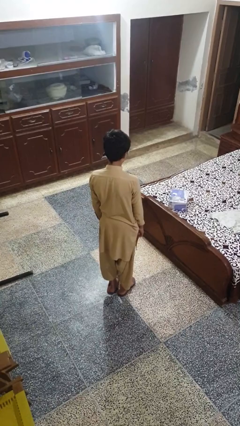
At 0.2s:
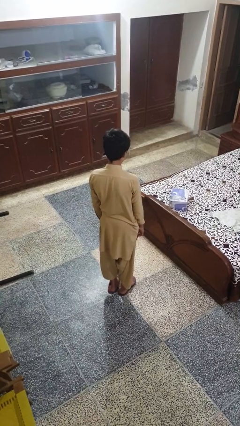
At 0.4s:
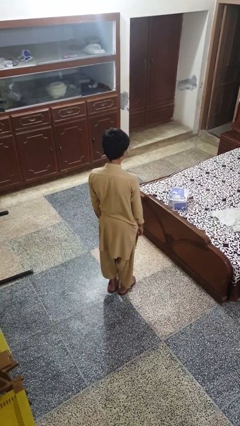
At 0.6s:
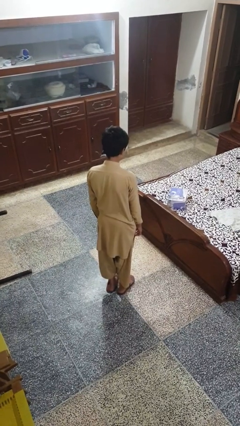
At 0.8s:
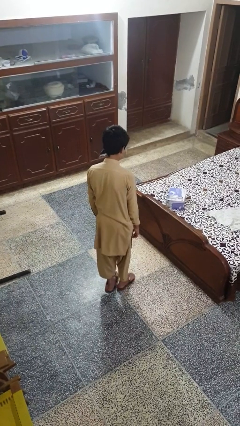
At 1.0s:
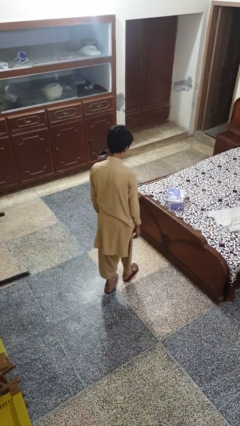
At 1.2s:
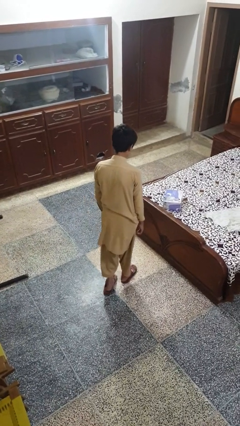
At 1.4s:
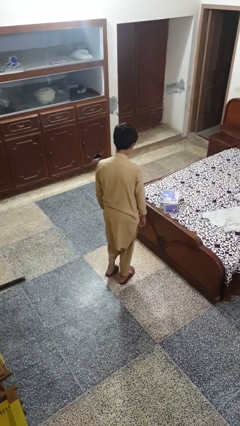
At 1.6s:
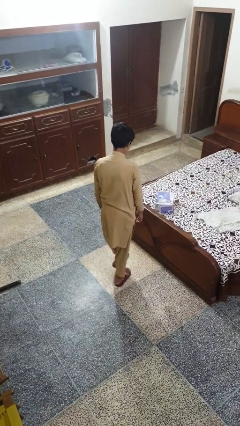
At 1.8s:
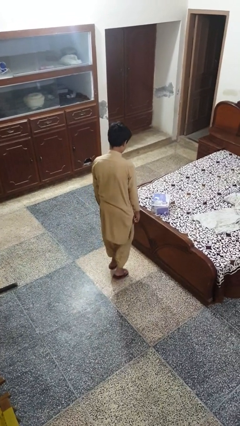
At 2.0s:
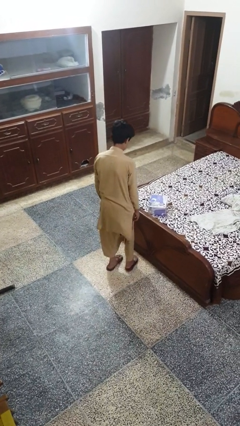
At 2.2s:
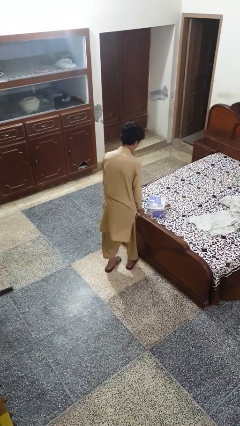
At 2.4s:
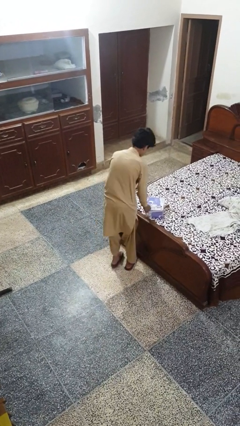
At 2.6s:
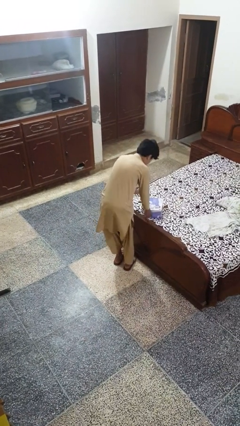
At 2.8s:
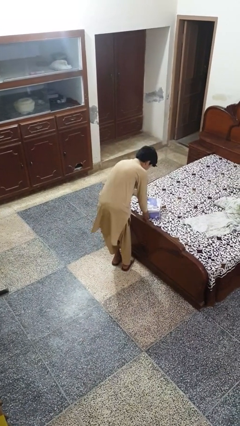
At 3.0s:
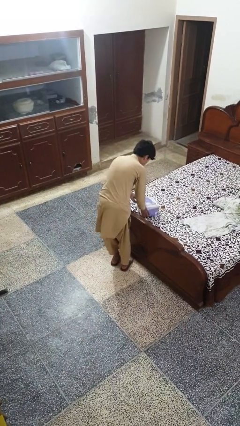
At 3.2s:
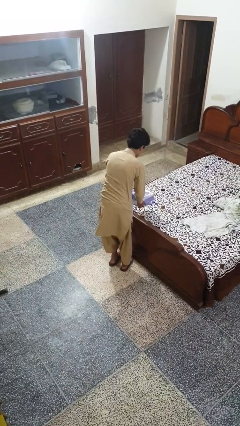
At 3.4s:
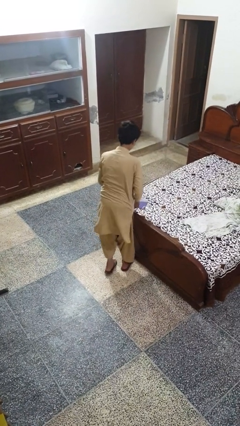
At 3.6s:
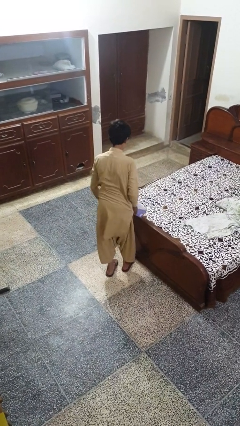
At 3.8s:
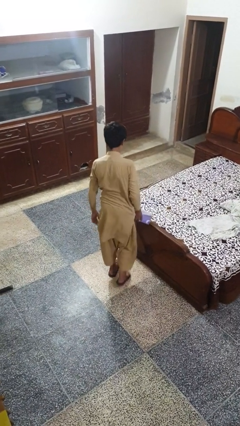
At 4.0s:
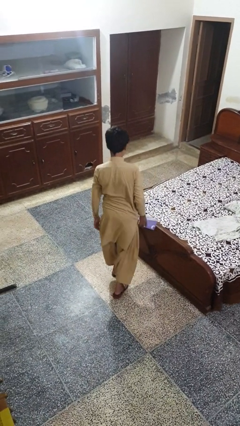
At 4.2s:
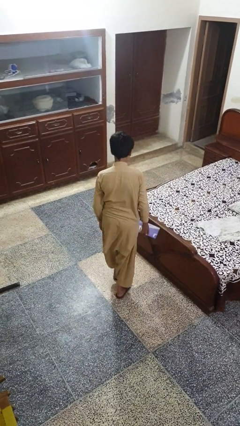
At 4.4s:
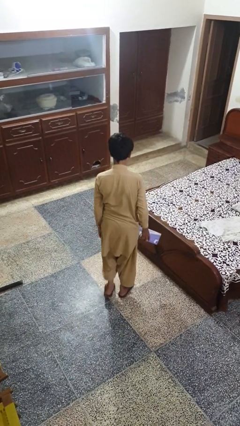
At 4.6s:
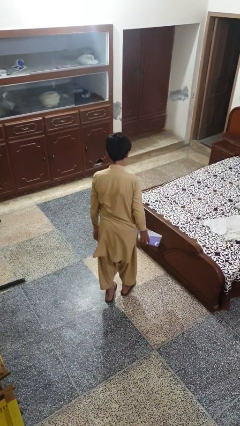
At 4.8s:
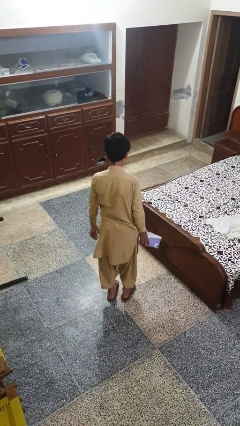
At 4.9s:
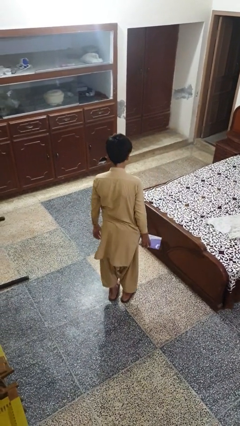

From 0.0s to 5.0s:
person picks up object from bed

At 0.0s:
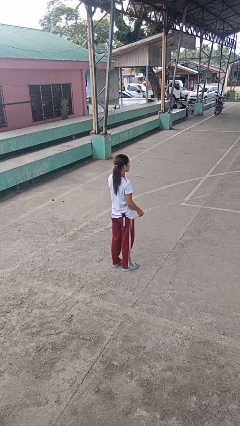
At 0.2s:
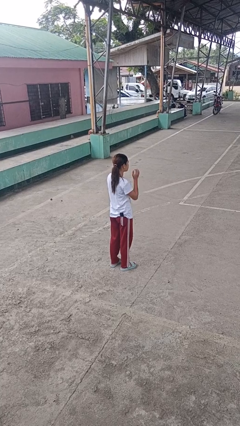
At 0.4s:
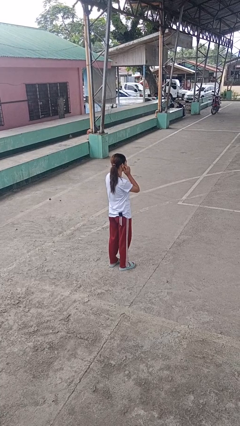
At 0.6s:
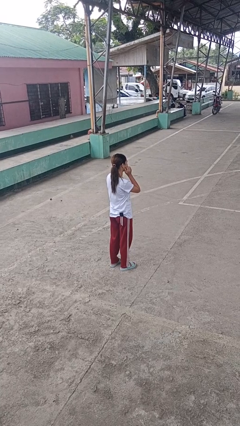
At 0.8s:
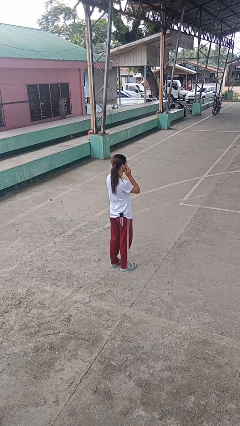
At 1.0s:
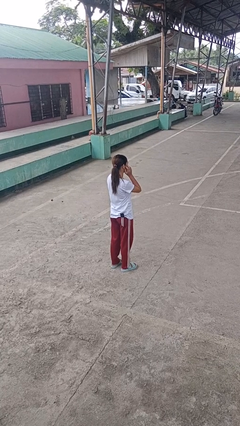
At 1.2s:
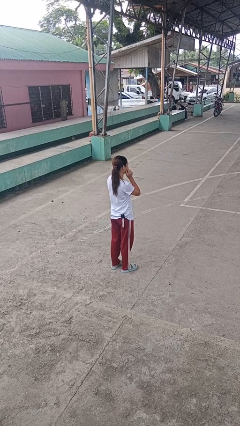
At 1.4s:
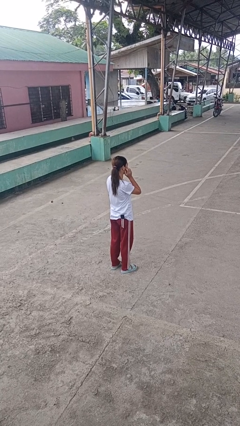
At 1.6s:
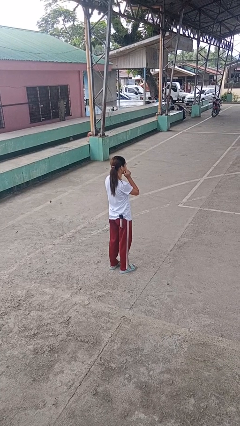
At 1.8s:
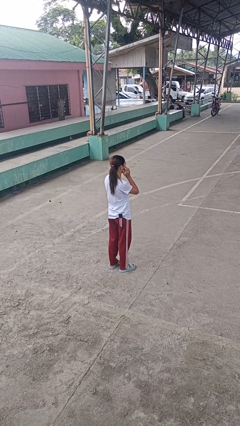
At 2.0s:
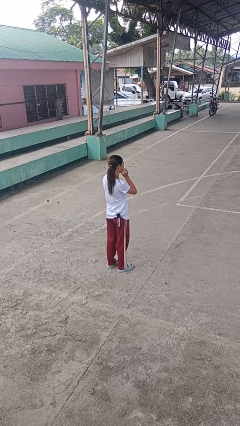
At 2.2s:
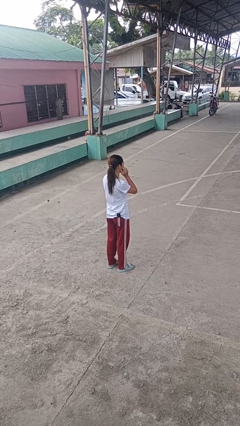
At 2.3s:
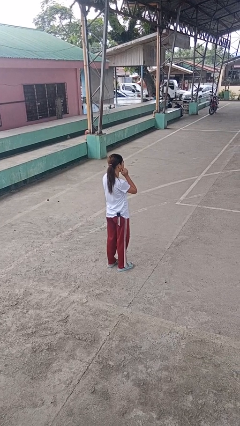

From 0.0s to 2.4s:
person scratches face

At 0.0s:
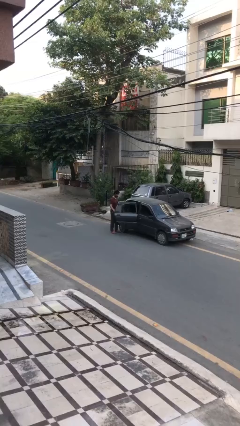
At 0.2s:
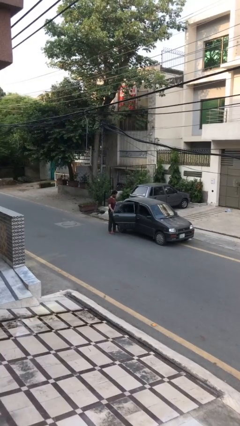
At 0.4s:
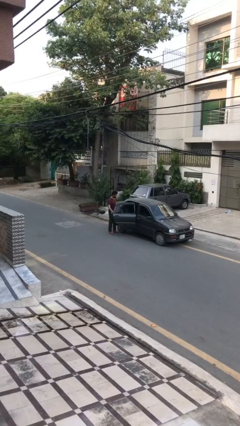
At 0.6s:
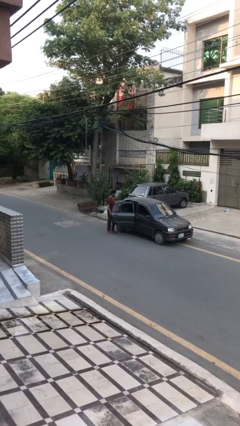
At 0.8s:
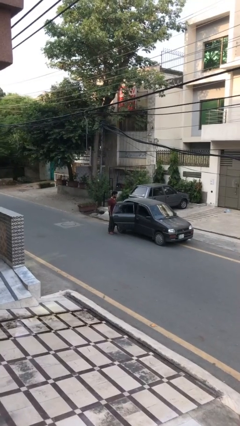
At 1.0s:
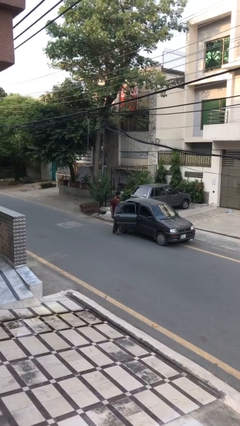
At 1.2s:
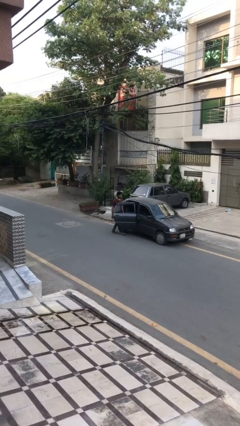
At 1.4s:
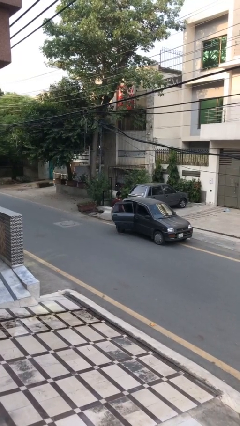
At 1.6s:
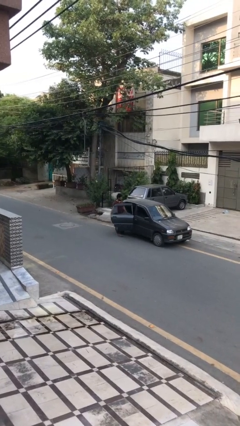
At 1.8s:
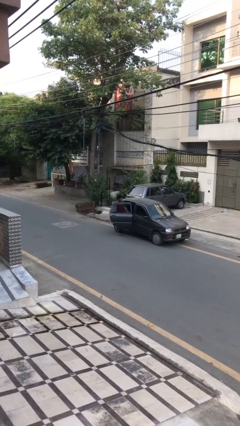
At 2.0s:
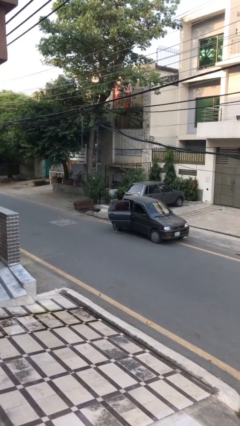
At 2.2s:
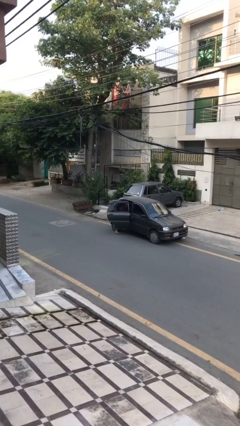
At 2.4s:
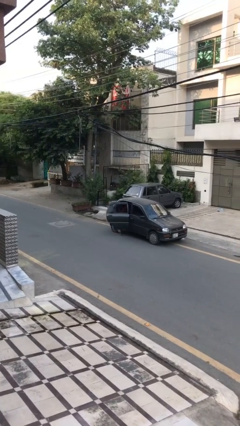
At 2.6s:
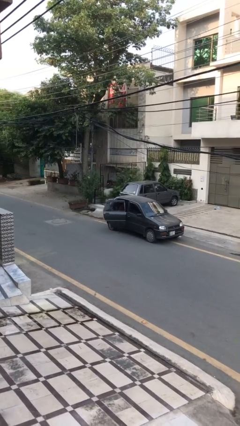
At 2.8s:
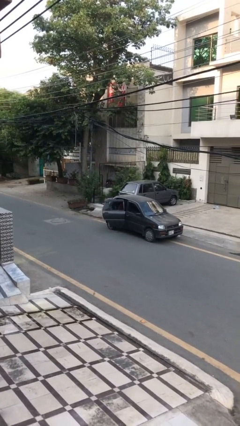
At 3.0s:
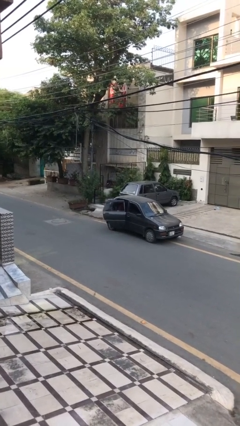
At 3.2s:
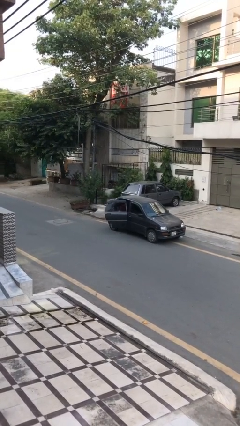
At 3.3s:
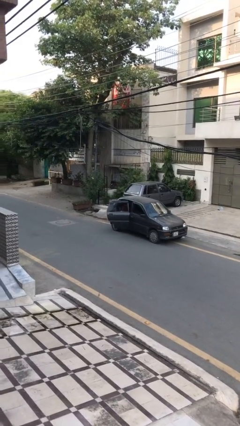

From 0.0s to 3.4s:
person enters car

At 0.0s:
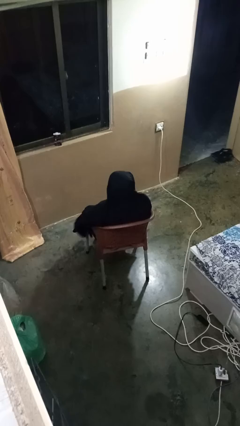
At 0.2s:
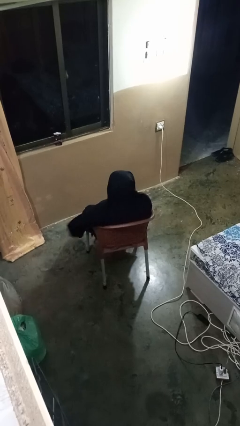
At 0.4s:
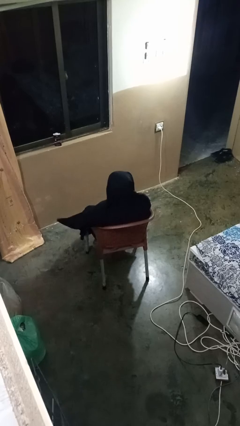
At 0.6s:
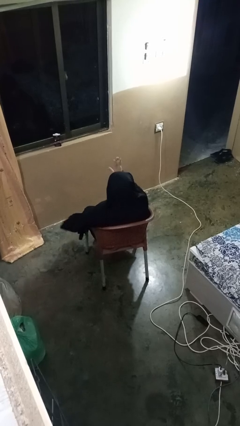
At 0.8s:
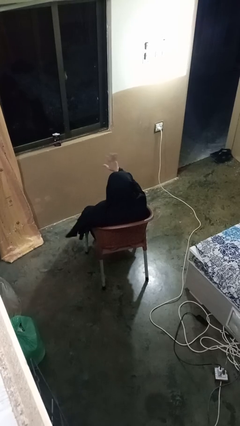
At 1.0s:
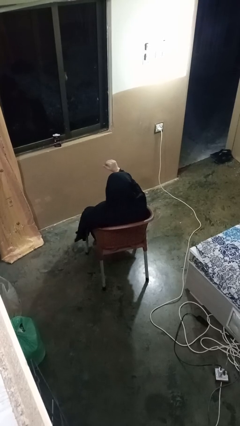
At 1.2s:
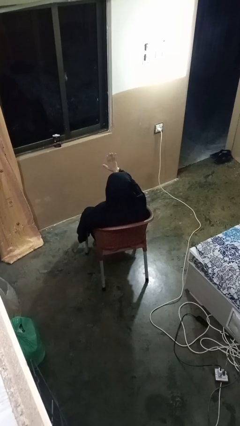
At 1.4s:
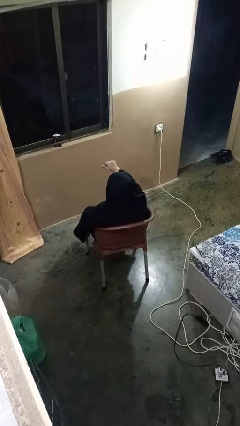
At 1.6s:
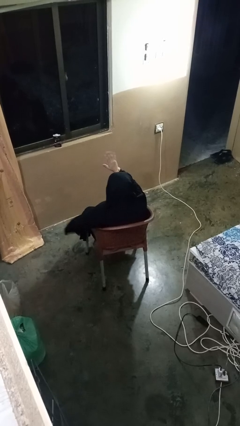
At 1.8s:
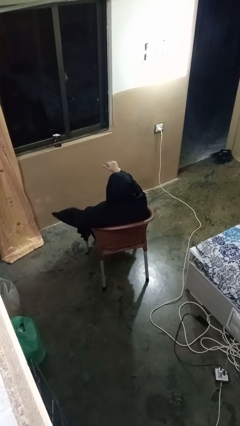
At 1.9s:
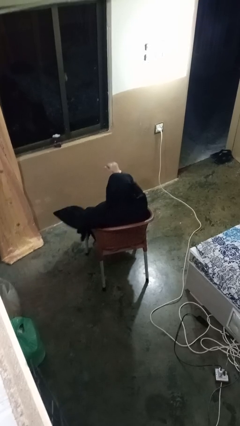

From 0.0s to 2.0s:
person gestures come here

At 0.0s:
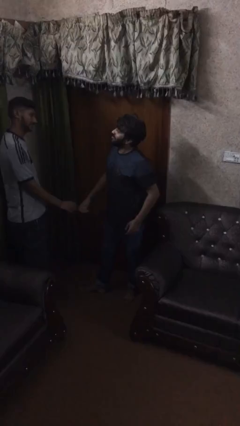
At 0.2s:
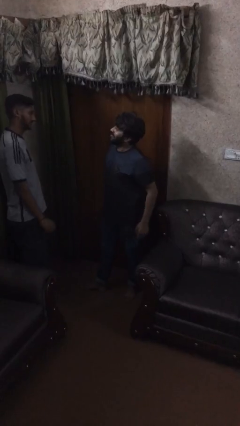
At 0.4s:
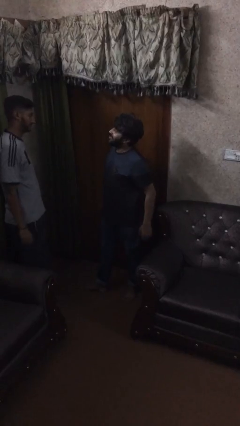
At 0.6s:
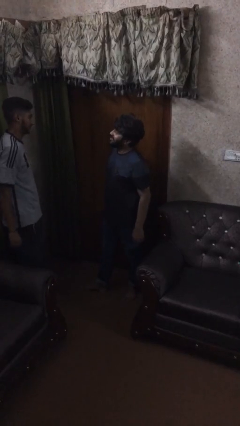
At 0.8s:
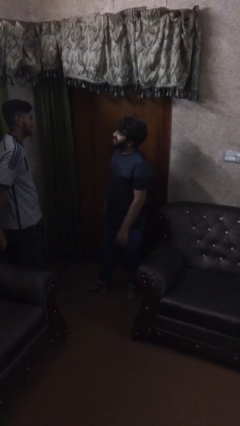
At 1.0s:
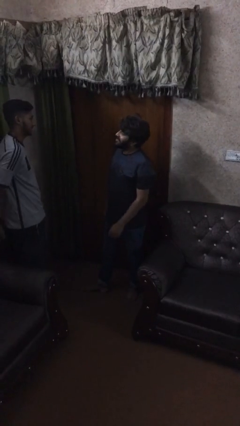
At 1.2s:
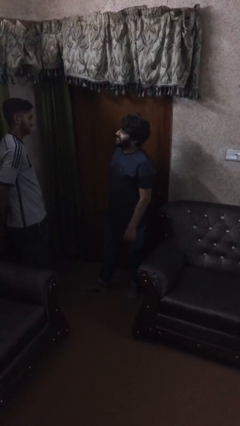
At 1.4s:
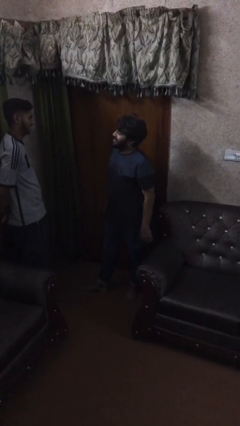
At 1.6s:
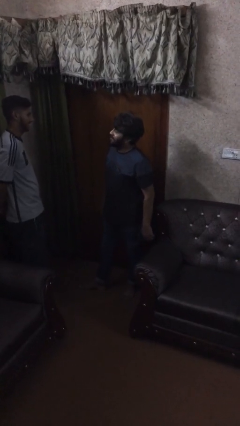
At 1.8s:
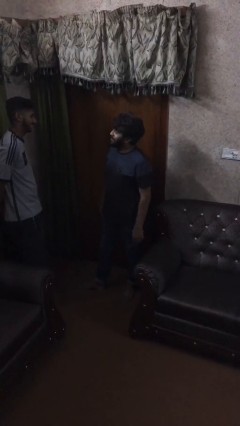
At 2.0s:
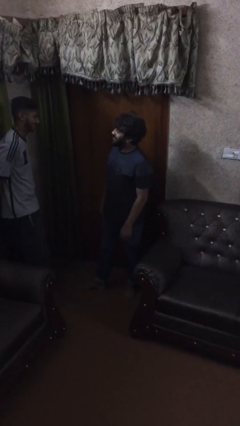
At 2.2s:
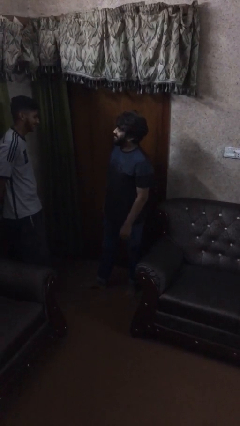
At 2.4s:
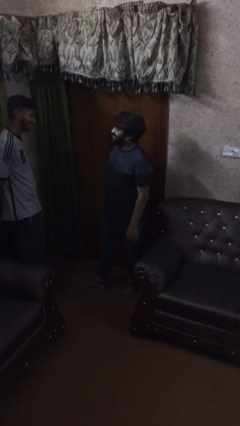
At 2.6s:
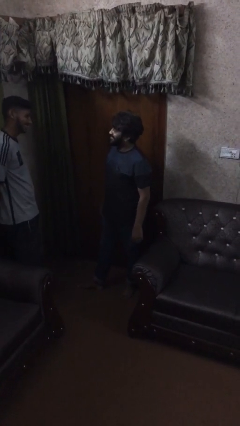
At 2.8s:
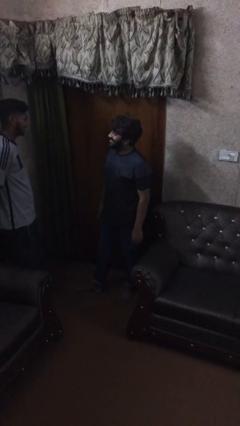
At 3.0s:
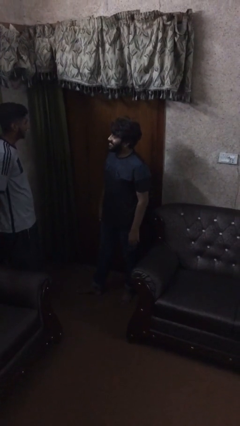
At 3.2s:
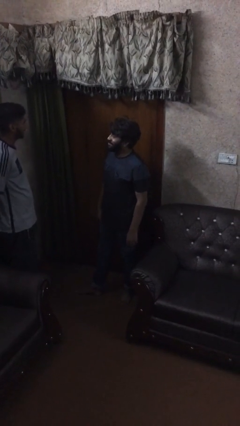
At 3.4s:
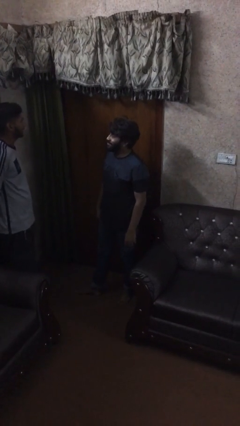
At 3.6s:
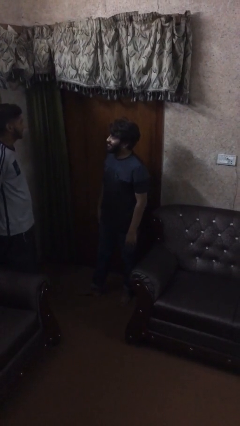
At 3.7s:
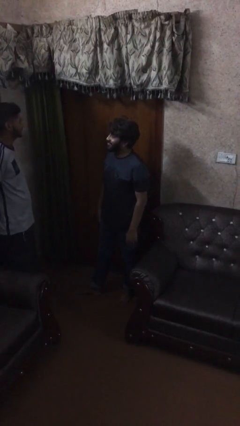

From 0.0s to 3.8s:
person talks to person

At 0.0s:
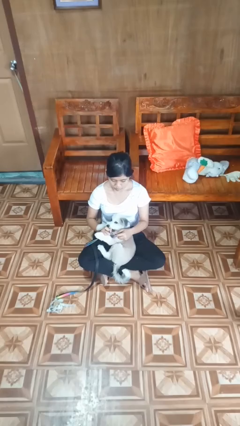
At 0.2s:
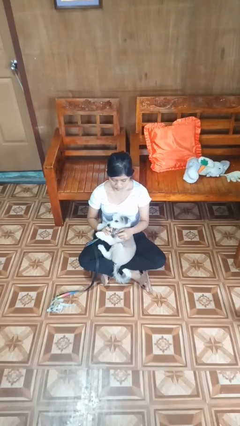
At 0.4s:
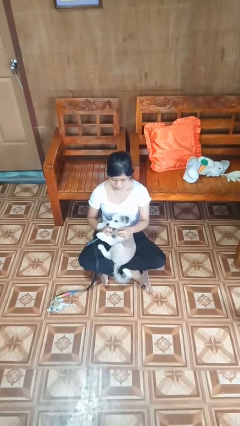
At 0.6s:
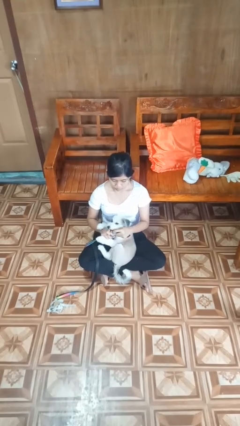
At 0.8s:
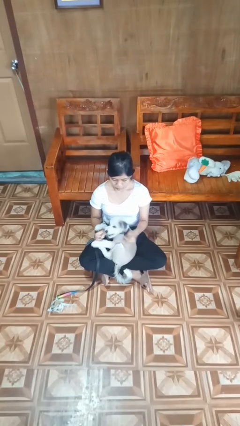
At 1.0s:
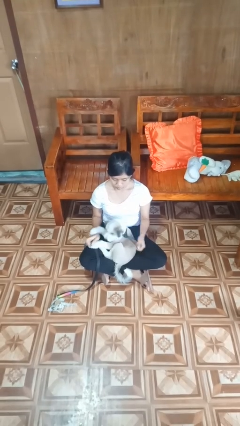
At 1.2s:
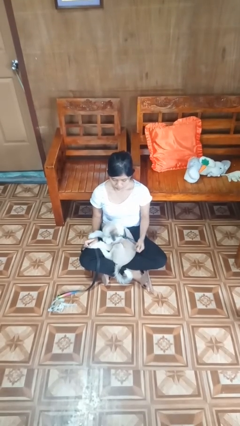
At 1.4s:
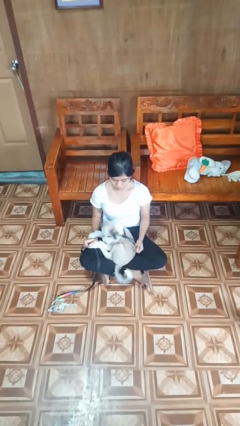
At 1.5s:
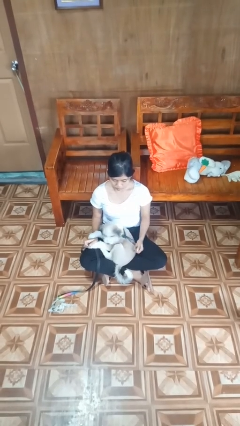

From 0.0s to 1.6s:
person unattaches leash from dog
